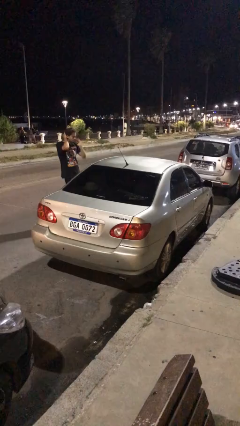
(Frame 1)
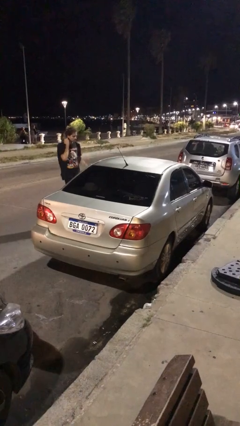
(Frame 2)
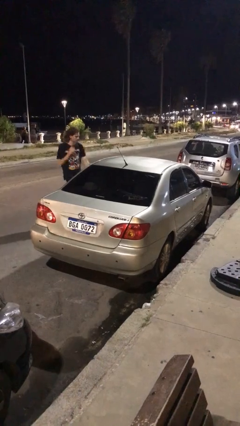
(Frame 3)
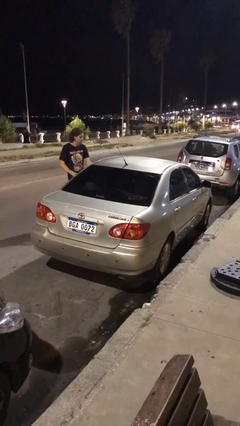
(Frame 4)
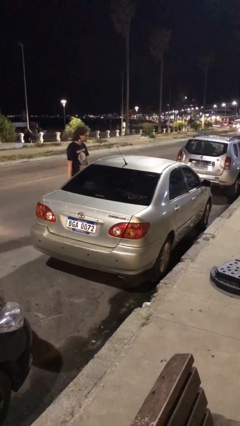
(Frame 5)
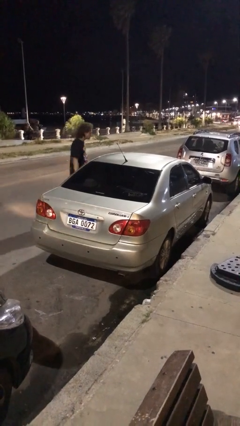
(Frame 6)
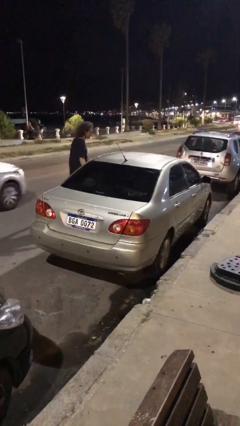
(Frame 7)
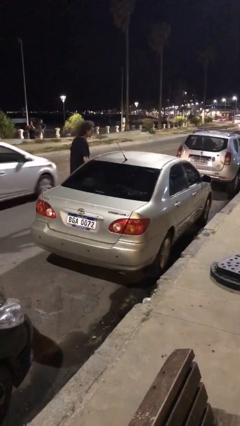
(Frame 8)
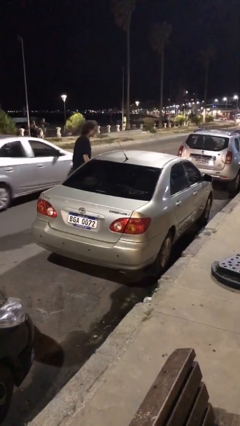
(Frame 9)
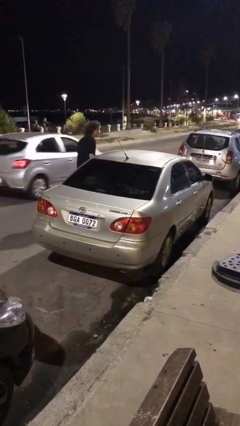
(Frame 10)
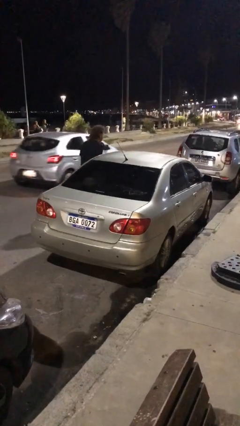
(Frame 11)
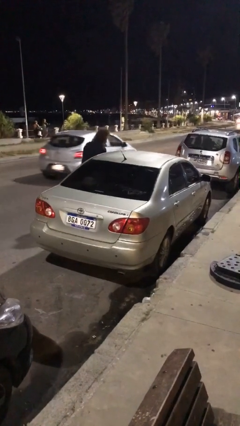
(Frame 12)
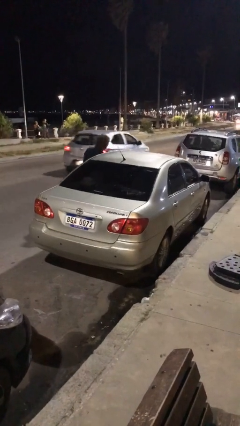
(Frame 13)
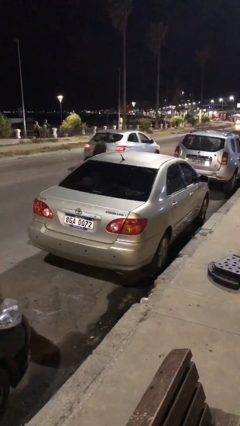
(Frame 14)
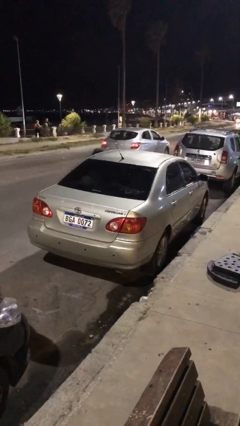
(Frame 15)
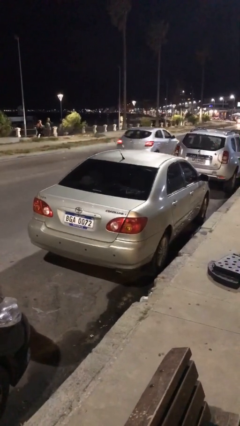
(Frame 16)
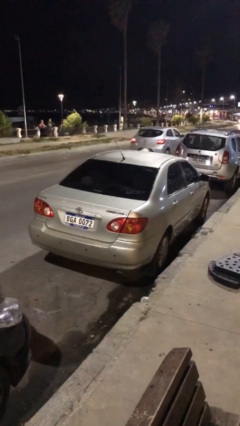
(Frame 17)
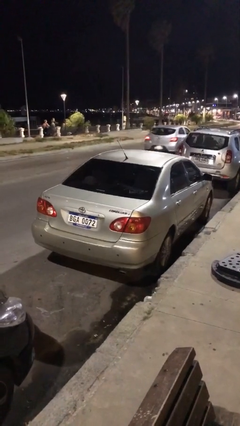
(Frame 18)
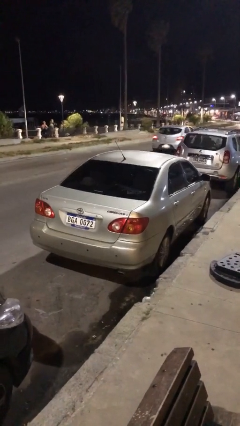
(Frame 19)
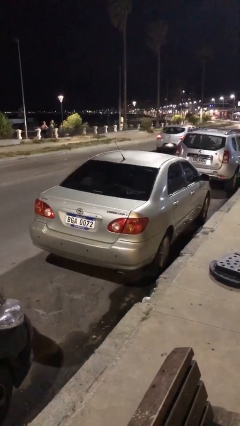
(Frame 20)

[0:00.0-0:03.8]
car picks up person

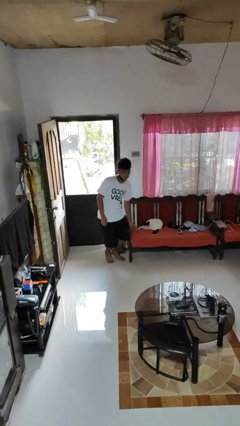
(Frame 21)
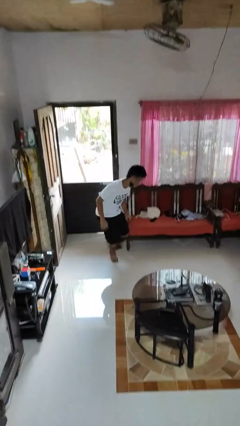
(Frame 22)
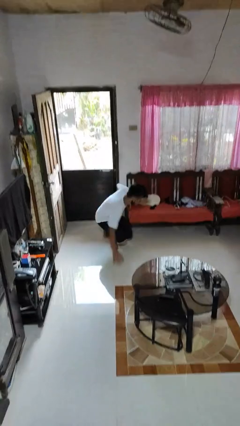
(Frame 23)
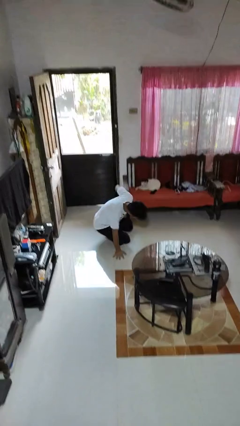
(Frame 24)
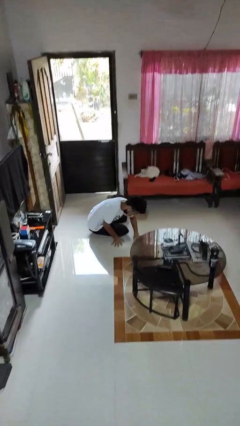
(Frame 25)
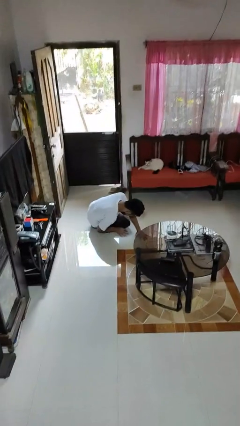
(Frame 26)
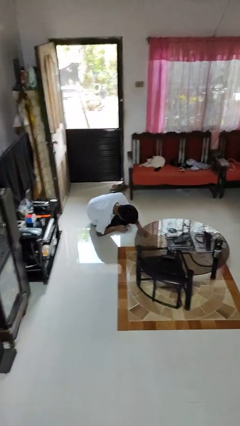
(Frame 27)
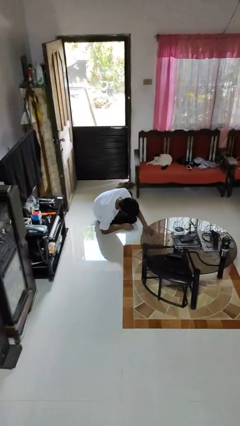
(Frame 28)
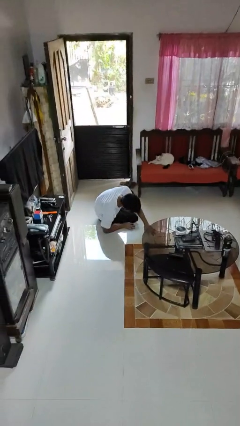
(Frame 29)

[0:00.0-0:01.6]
person trips on object on floor

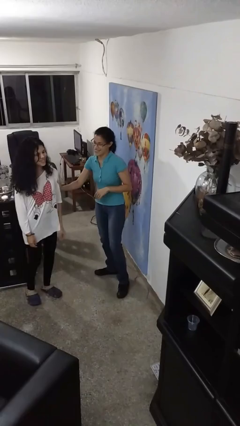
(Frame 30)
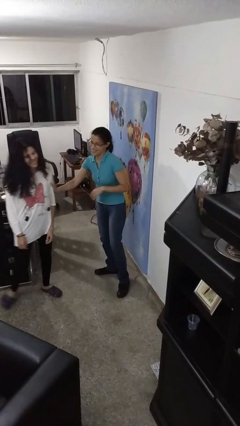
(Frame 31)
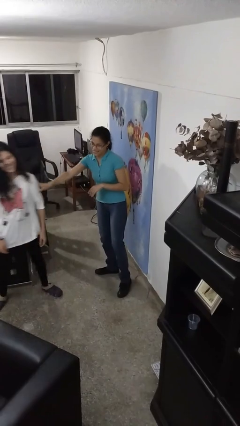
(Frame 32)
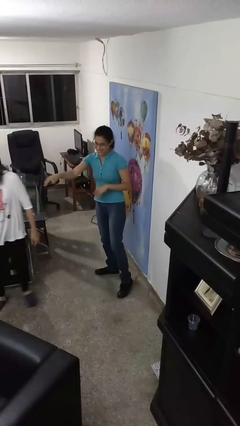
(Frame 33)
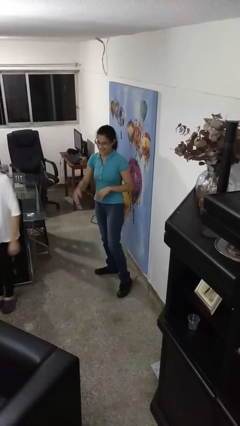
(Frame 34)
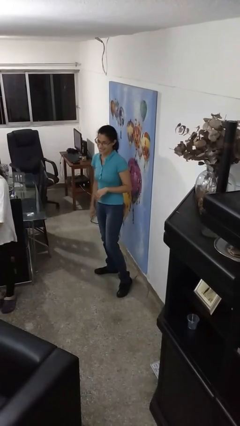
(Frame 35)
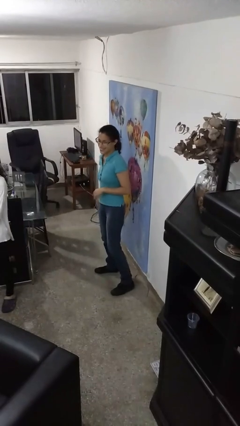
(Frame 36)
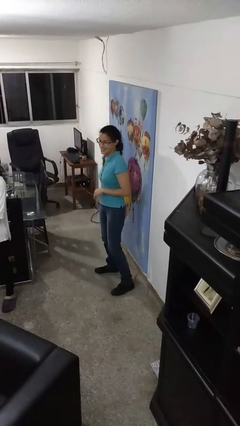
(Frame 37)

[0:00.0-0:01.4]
person shoves person

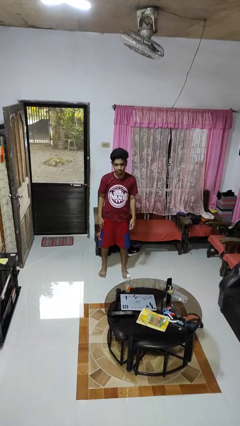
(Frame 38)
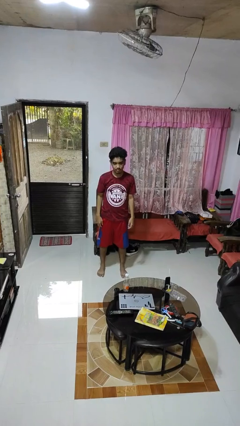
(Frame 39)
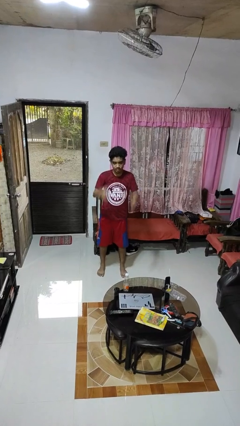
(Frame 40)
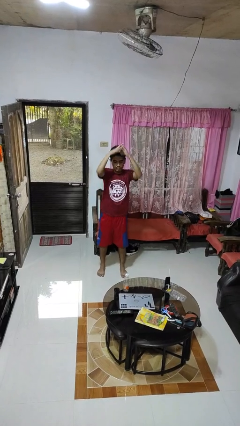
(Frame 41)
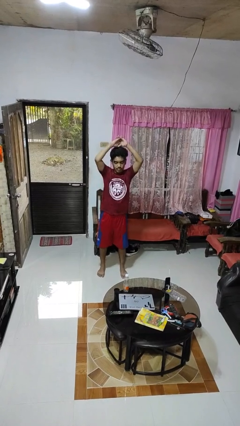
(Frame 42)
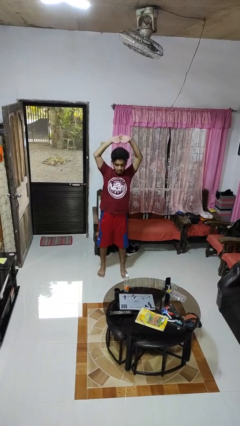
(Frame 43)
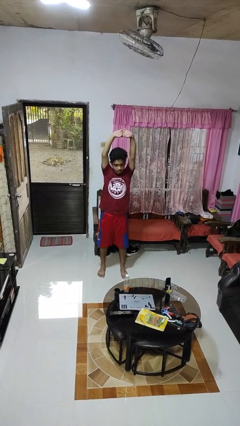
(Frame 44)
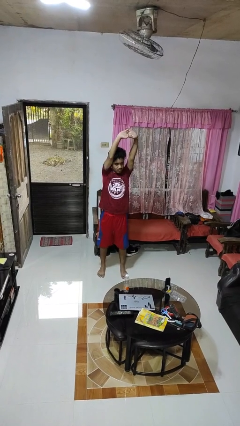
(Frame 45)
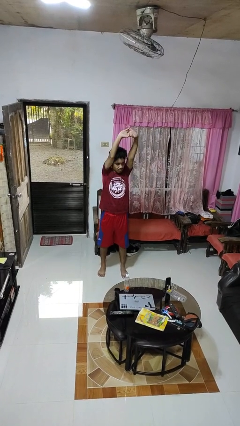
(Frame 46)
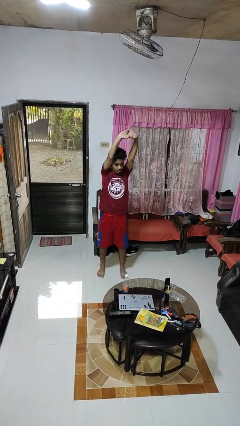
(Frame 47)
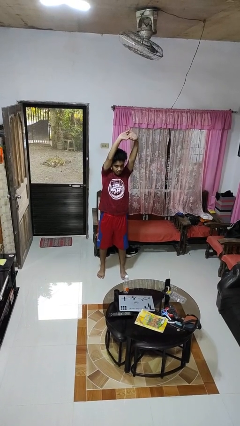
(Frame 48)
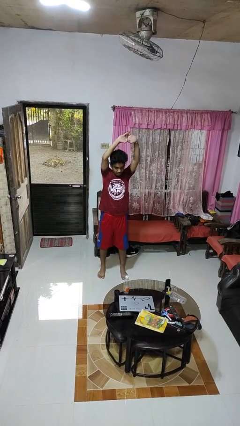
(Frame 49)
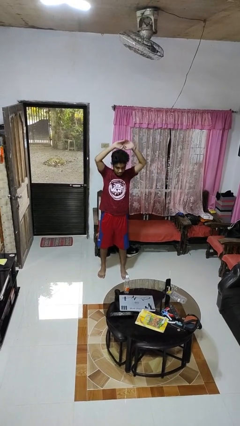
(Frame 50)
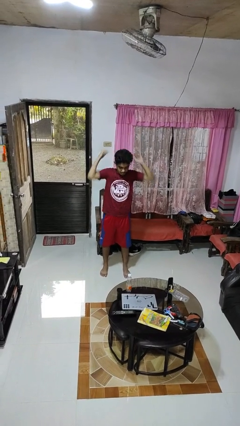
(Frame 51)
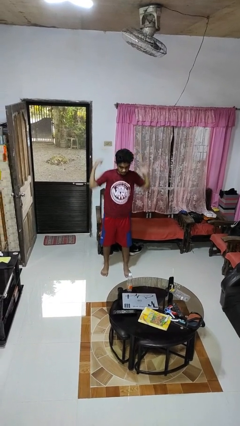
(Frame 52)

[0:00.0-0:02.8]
person stretches arms over head

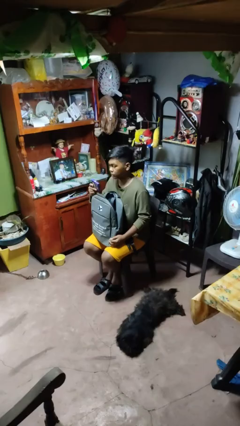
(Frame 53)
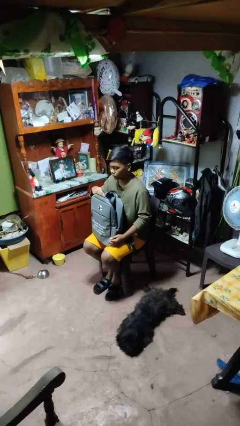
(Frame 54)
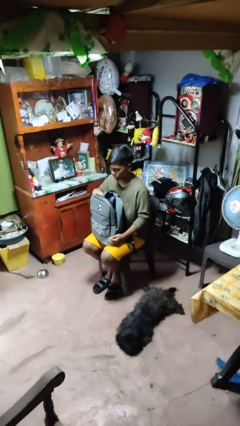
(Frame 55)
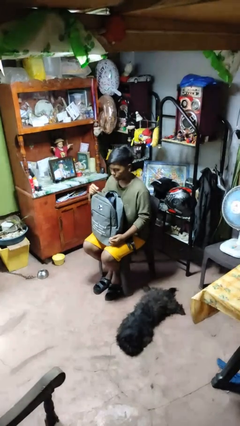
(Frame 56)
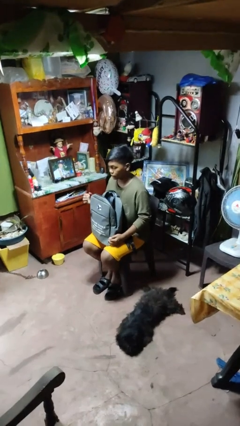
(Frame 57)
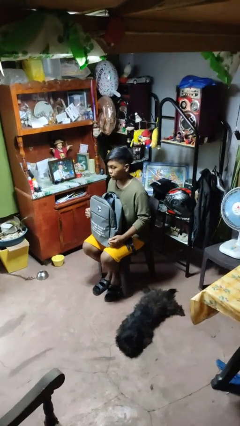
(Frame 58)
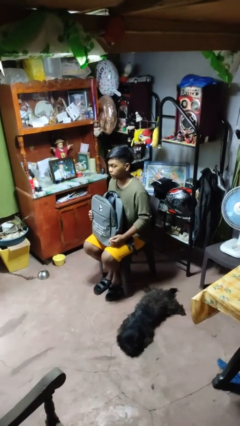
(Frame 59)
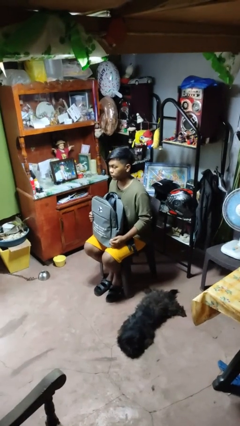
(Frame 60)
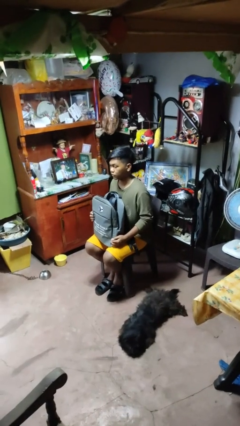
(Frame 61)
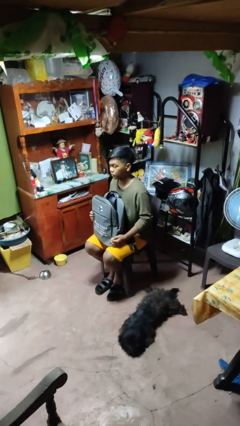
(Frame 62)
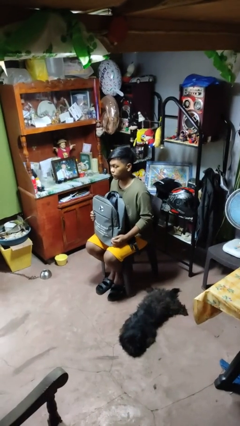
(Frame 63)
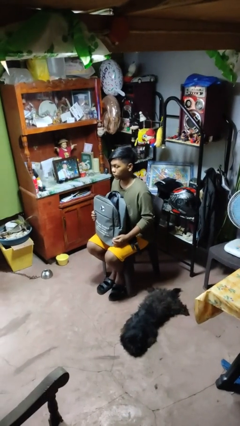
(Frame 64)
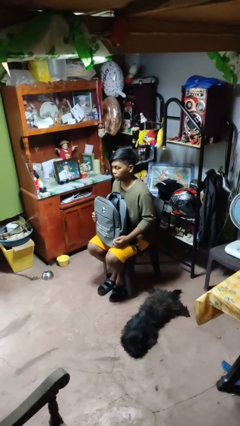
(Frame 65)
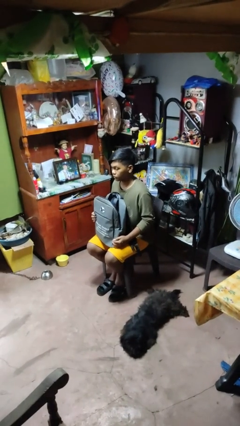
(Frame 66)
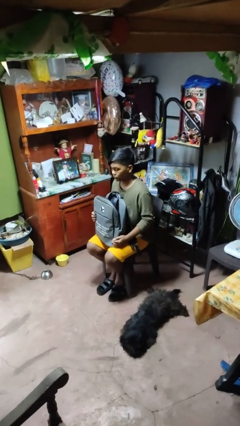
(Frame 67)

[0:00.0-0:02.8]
person puts object into backpack

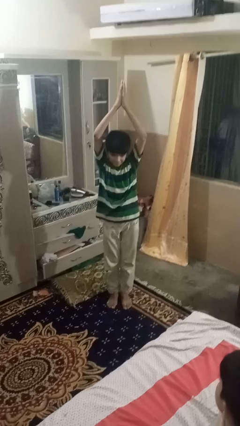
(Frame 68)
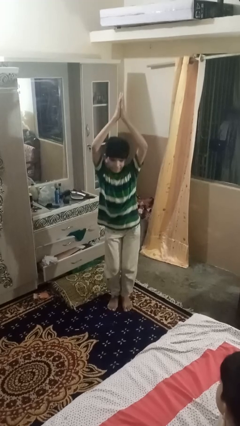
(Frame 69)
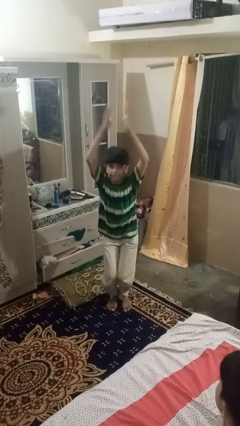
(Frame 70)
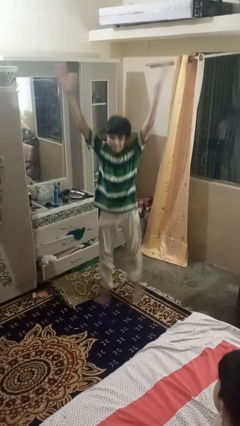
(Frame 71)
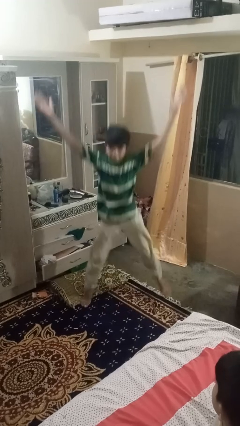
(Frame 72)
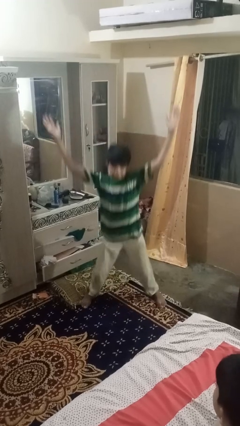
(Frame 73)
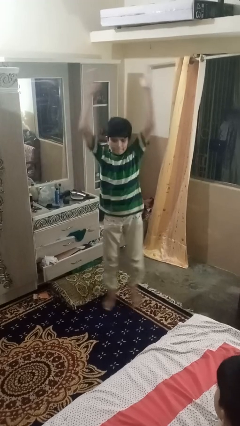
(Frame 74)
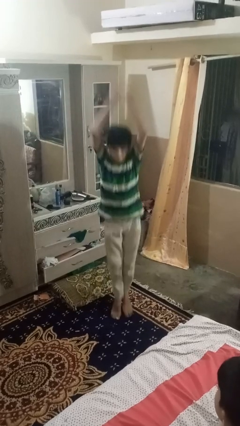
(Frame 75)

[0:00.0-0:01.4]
person exercises with jumping jacks

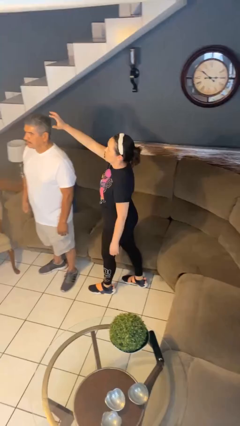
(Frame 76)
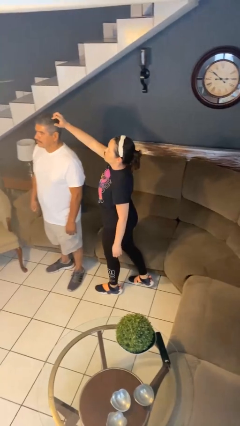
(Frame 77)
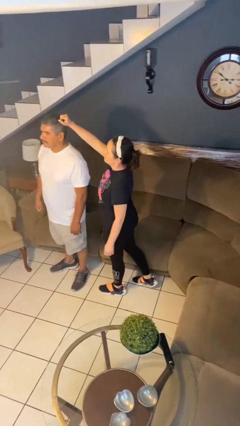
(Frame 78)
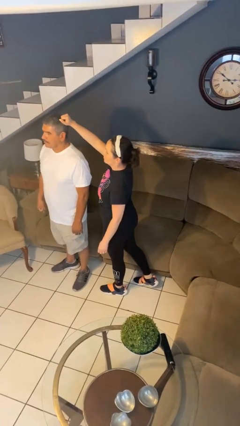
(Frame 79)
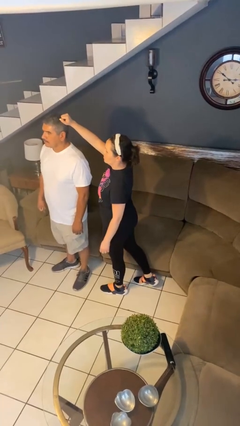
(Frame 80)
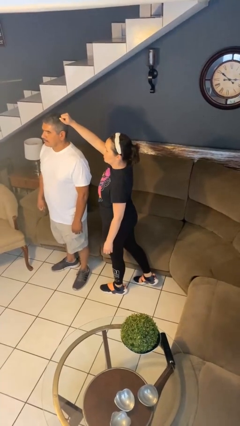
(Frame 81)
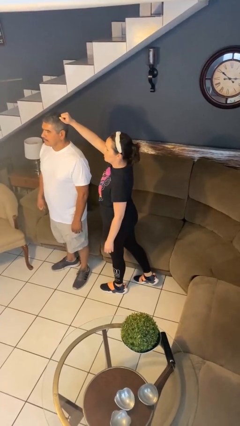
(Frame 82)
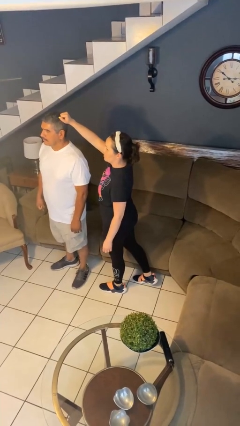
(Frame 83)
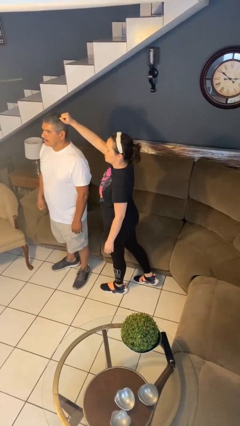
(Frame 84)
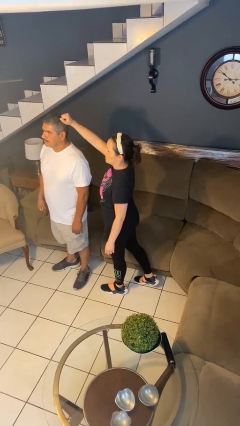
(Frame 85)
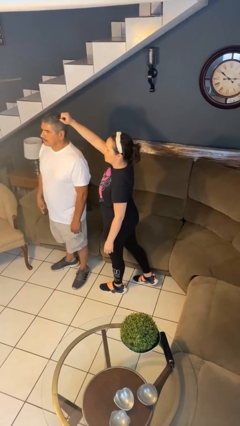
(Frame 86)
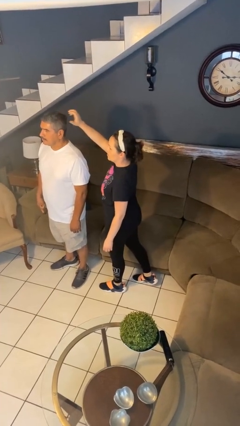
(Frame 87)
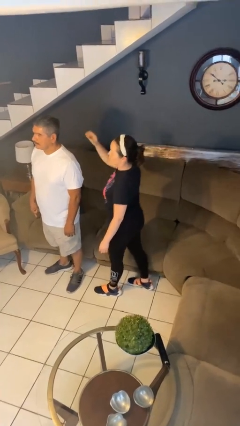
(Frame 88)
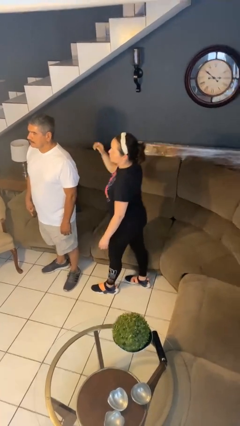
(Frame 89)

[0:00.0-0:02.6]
person grabs person by hair

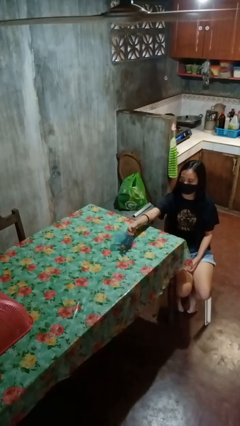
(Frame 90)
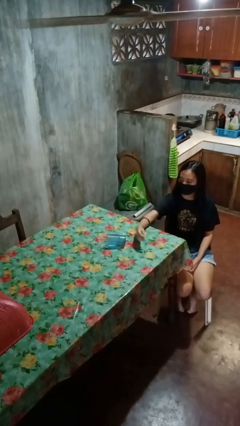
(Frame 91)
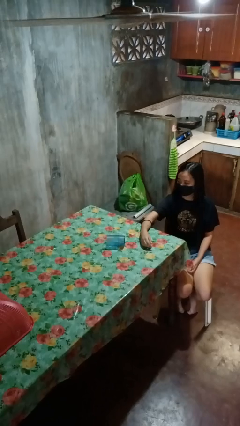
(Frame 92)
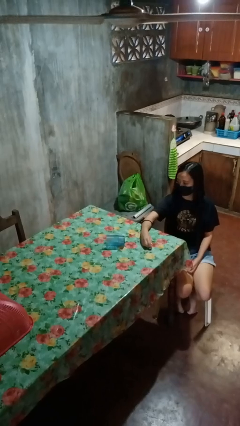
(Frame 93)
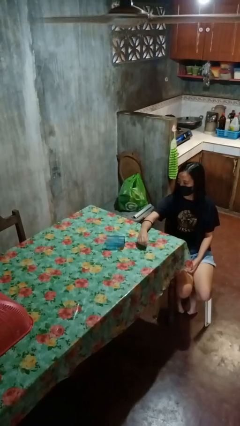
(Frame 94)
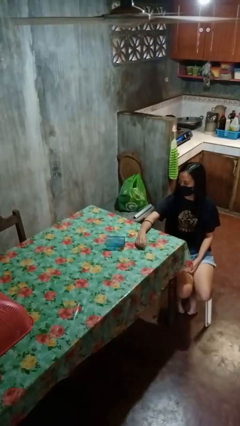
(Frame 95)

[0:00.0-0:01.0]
person spills on table
